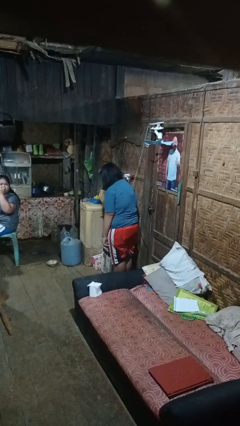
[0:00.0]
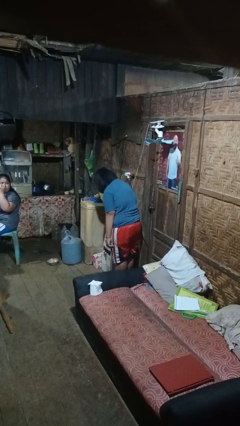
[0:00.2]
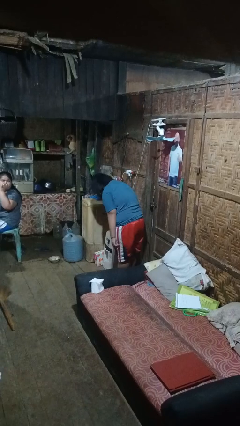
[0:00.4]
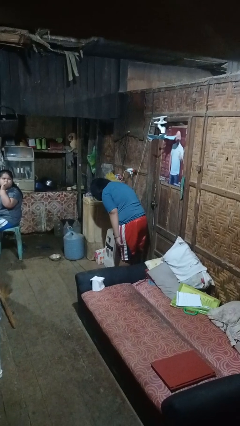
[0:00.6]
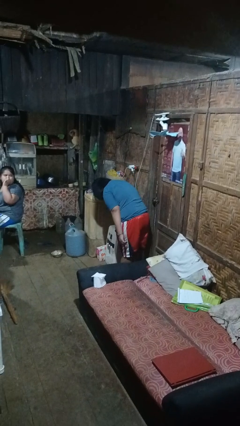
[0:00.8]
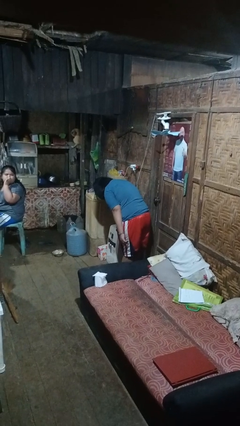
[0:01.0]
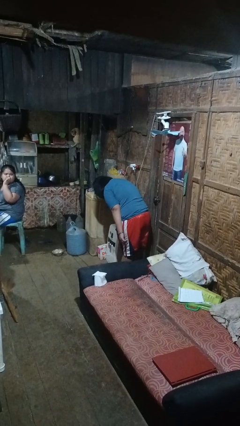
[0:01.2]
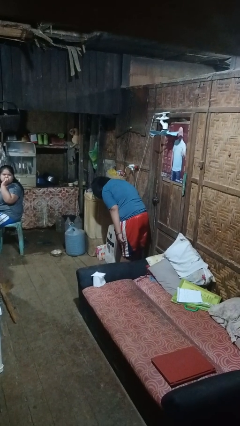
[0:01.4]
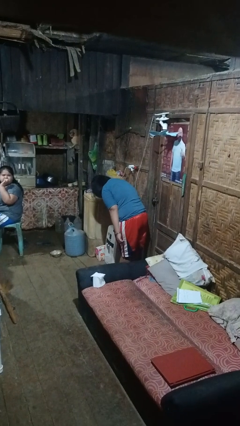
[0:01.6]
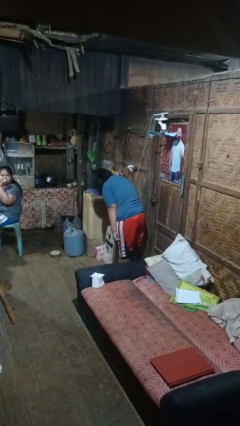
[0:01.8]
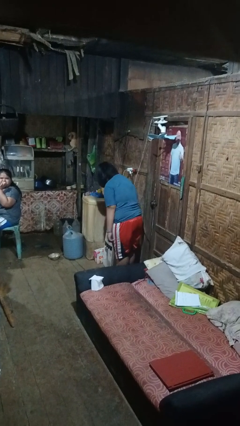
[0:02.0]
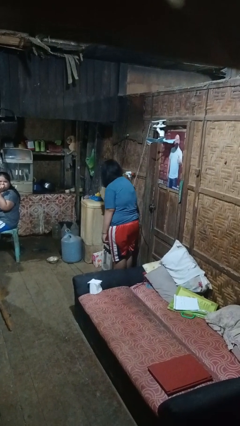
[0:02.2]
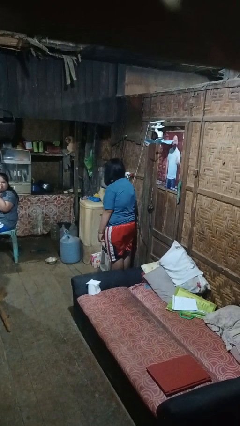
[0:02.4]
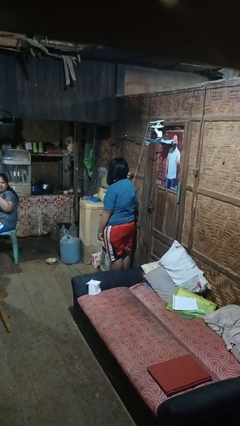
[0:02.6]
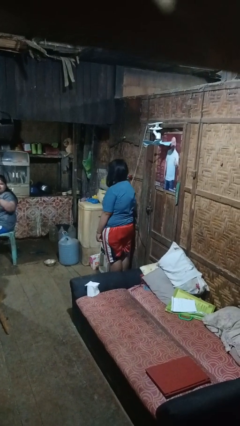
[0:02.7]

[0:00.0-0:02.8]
person bows

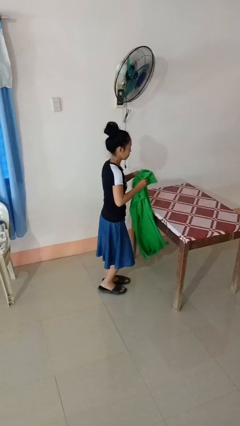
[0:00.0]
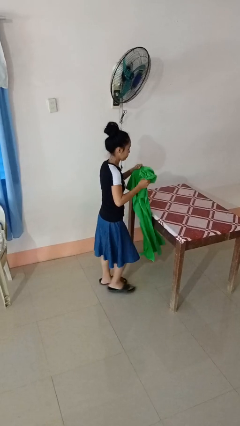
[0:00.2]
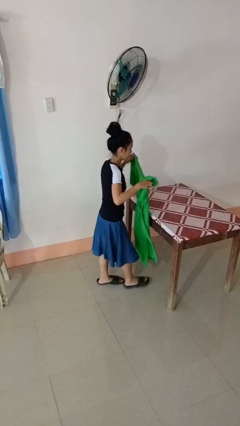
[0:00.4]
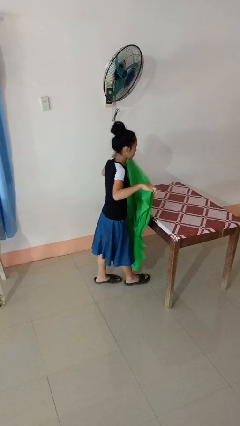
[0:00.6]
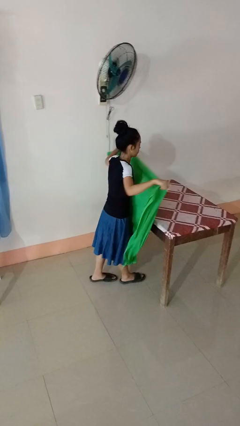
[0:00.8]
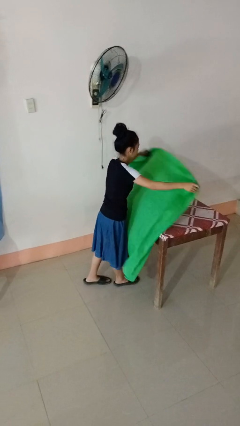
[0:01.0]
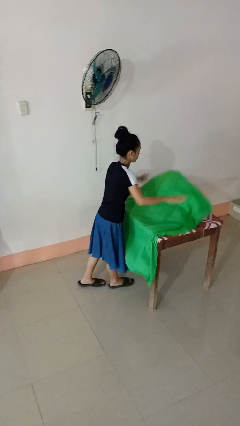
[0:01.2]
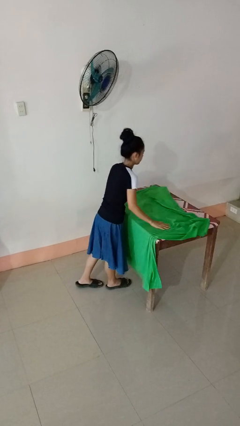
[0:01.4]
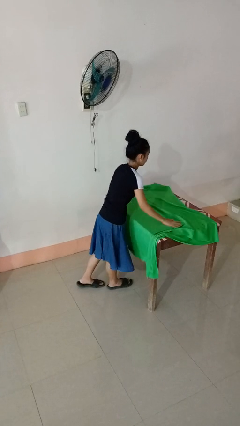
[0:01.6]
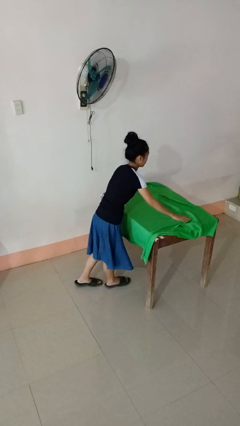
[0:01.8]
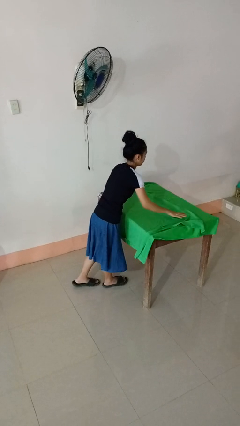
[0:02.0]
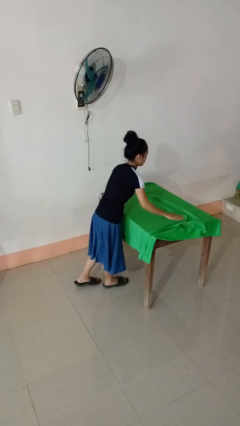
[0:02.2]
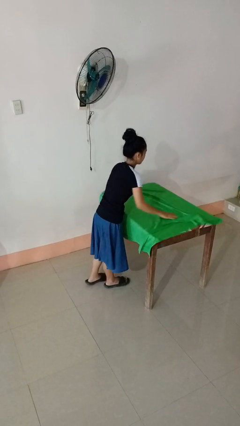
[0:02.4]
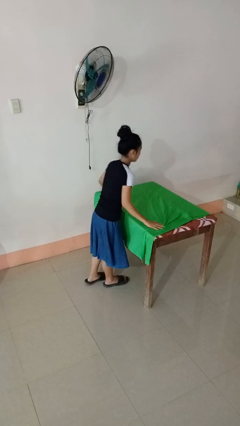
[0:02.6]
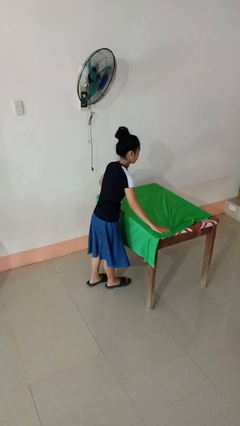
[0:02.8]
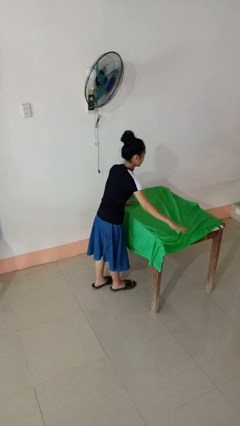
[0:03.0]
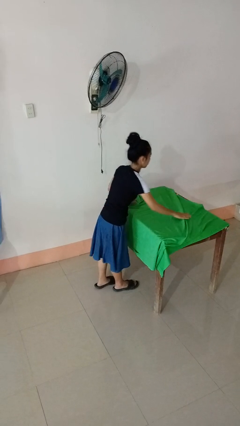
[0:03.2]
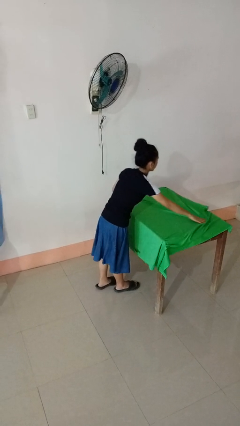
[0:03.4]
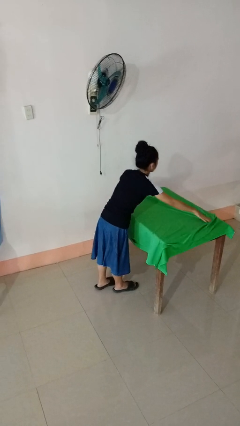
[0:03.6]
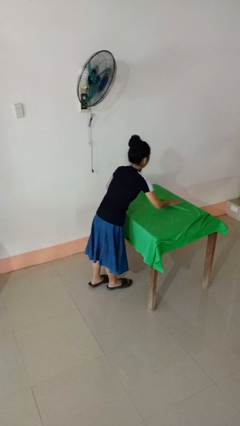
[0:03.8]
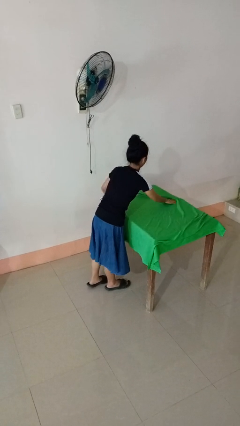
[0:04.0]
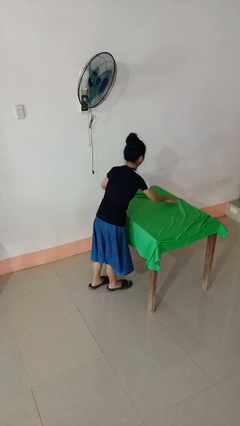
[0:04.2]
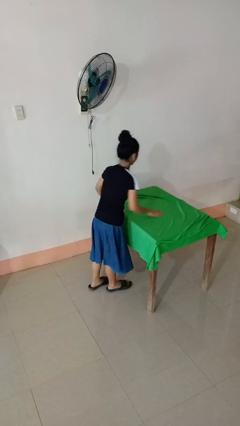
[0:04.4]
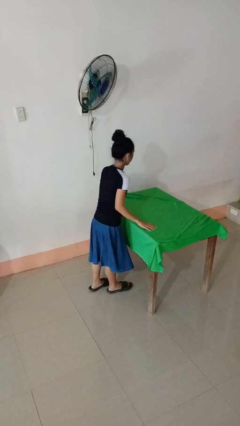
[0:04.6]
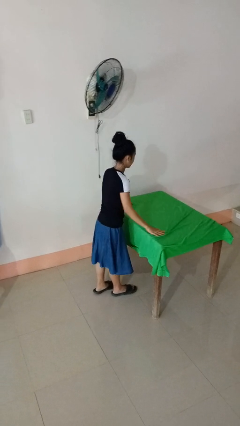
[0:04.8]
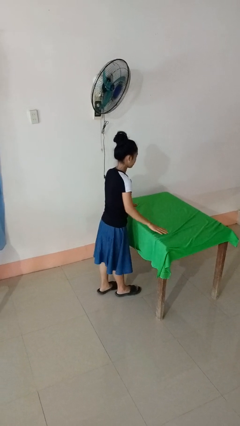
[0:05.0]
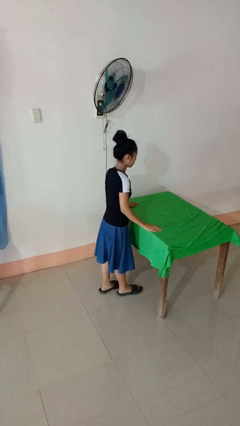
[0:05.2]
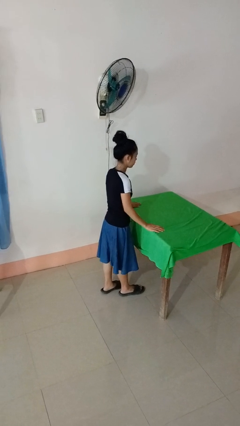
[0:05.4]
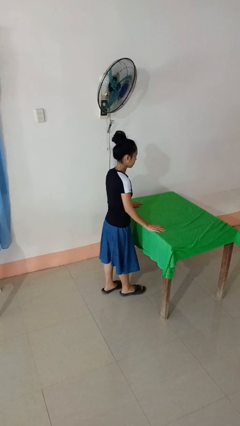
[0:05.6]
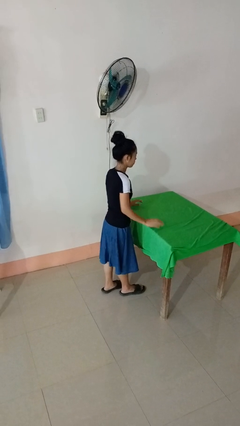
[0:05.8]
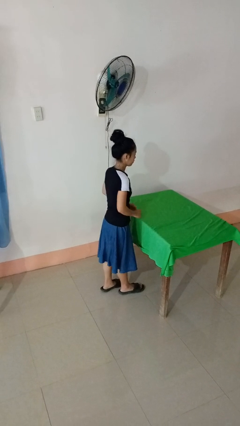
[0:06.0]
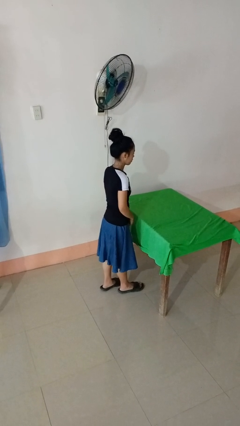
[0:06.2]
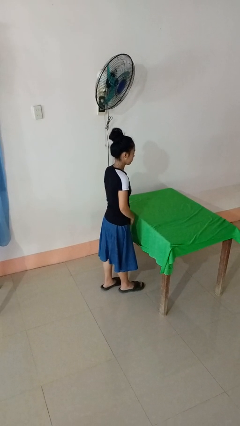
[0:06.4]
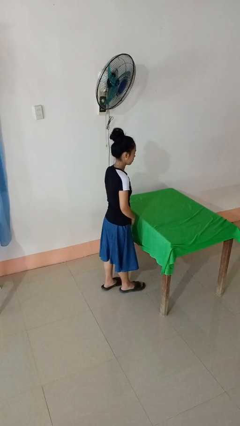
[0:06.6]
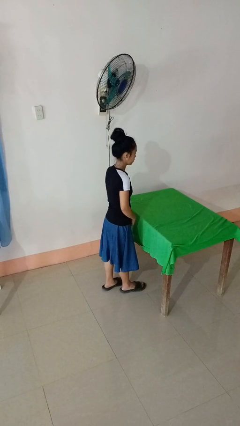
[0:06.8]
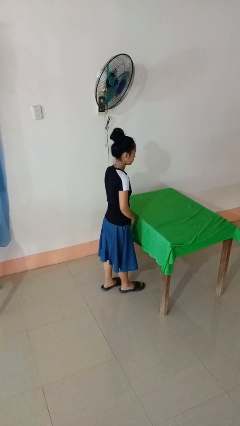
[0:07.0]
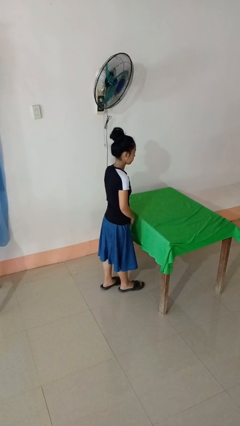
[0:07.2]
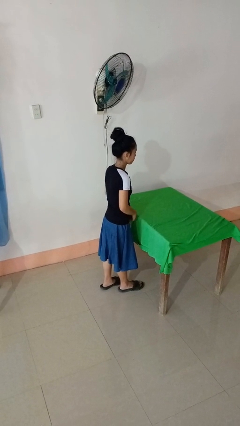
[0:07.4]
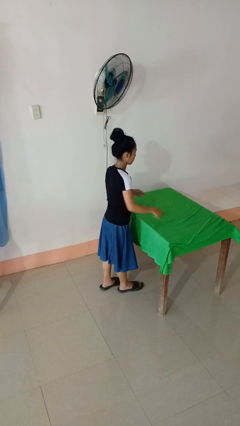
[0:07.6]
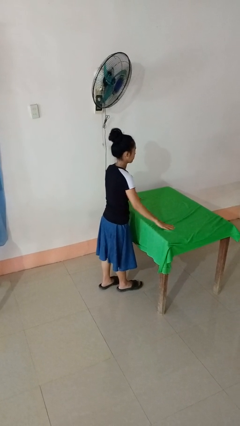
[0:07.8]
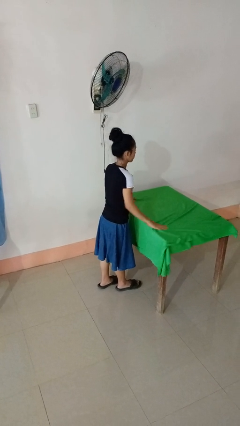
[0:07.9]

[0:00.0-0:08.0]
person spreads tablecloth

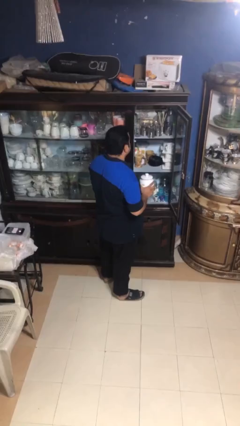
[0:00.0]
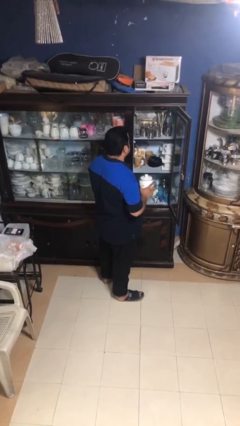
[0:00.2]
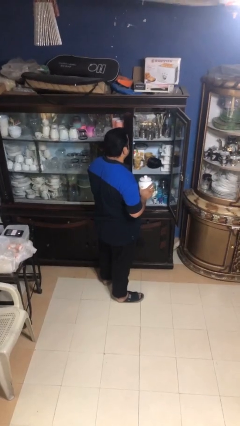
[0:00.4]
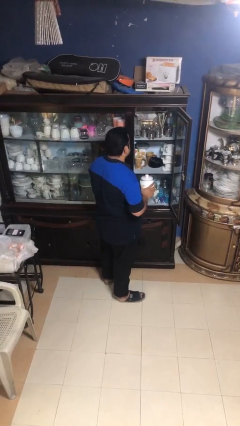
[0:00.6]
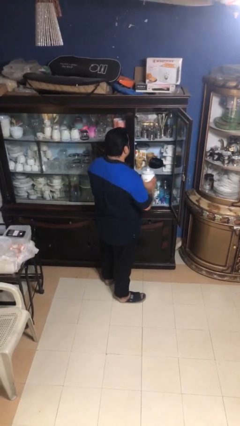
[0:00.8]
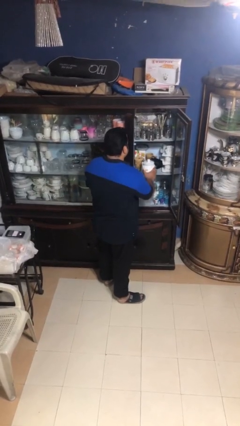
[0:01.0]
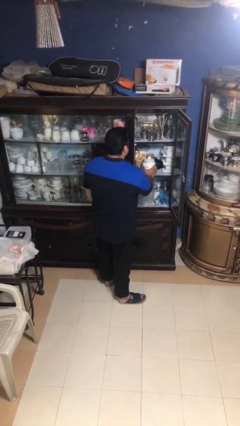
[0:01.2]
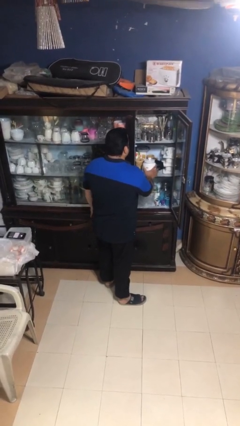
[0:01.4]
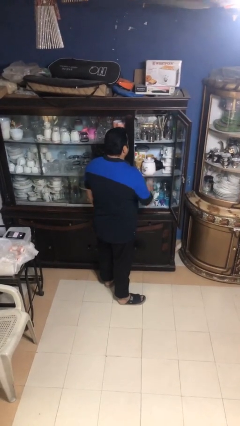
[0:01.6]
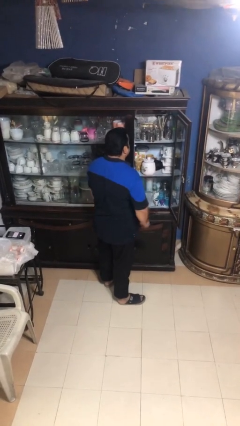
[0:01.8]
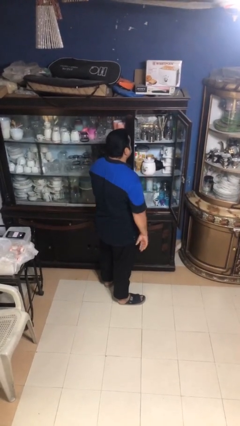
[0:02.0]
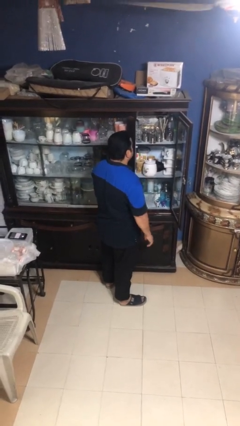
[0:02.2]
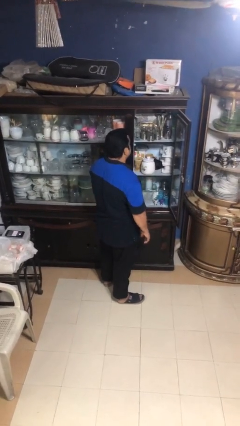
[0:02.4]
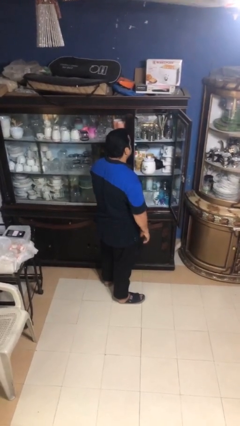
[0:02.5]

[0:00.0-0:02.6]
person puts down object into cabinet

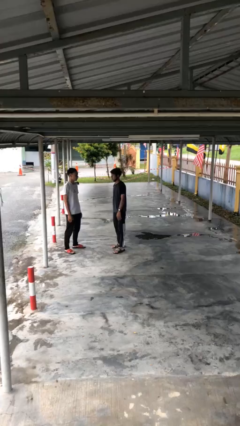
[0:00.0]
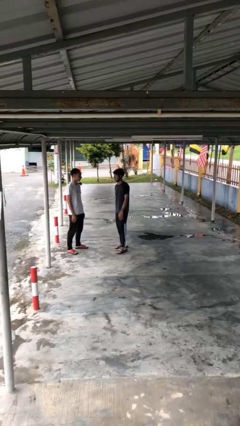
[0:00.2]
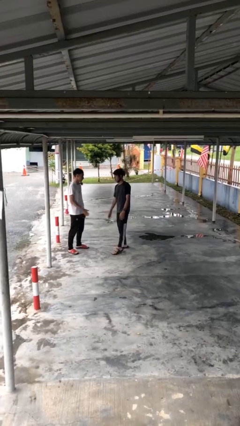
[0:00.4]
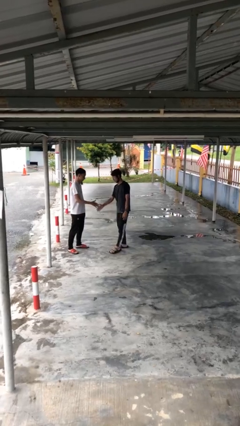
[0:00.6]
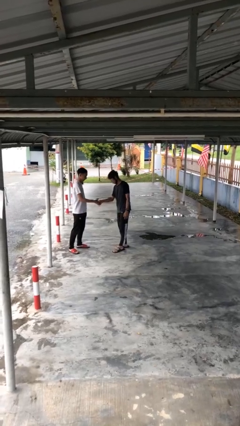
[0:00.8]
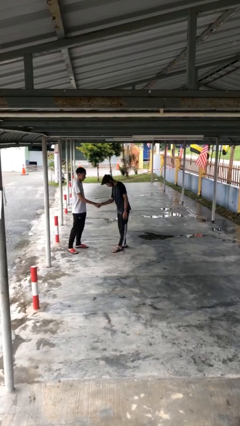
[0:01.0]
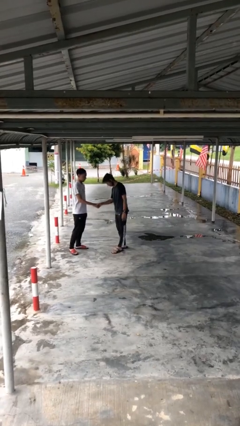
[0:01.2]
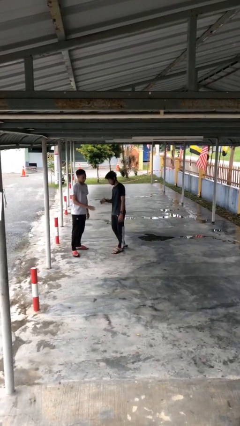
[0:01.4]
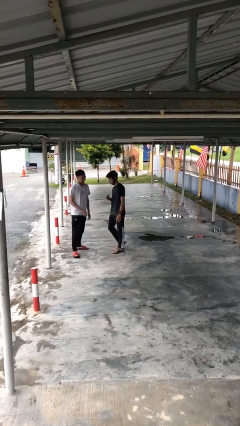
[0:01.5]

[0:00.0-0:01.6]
person shakes hand

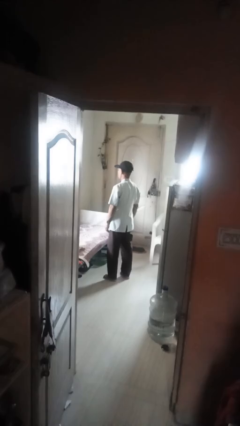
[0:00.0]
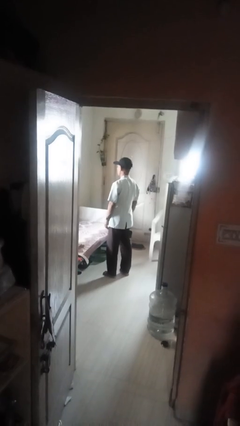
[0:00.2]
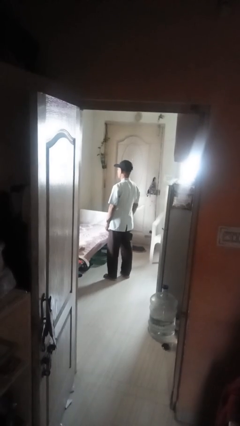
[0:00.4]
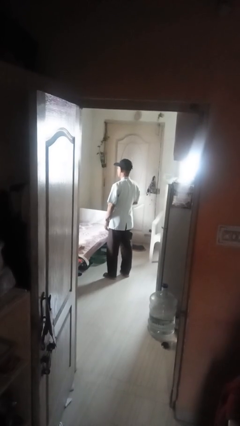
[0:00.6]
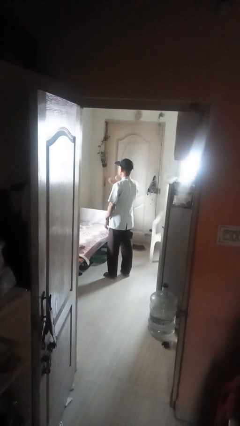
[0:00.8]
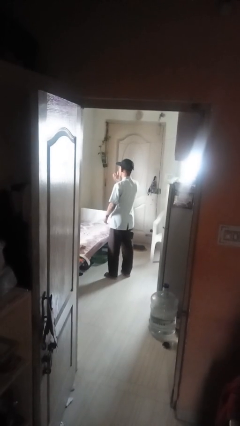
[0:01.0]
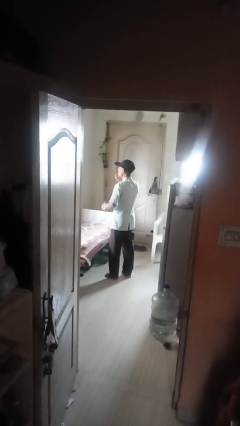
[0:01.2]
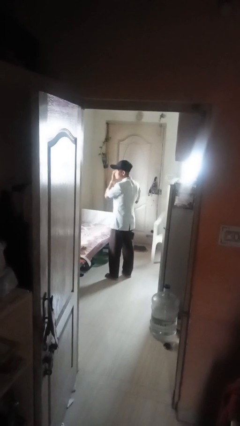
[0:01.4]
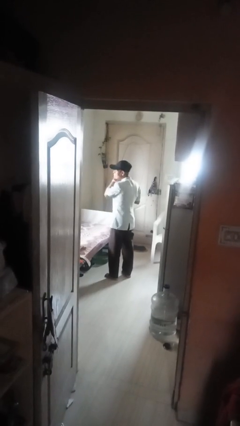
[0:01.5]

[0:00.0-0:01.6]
person strokes chin

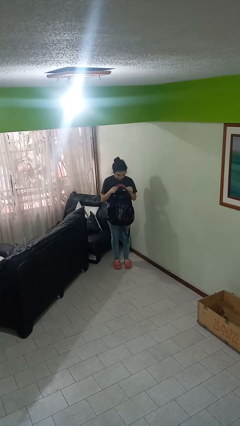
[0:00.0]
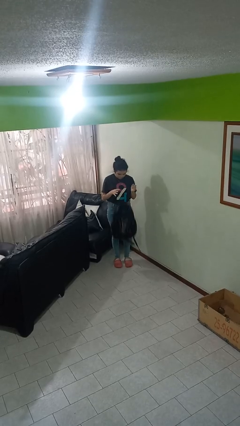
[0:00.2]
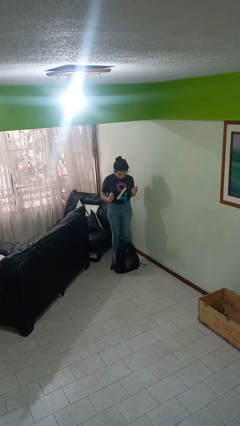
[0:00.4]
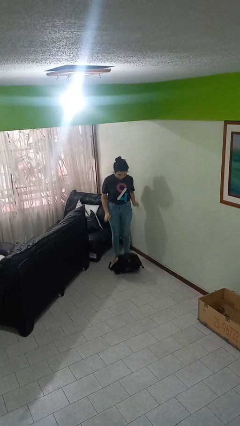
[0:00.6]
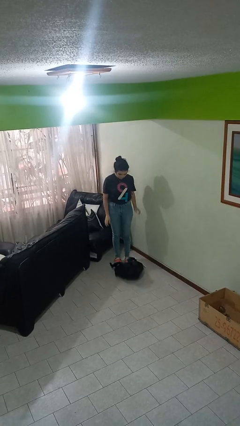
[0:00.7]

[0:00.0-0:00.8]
person drops object
